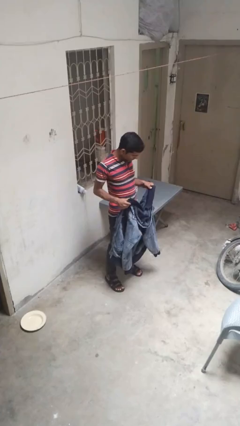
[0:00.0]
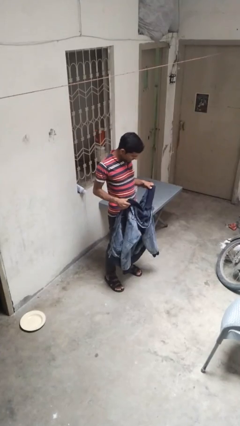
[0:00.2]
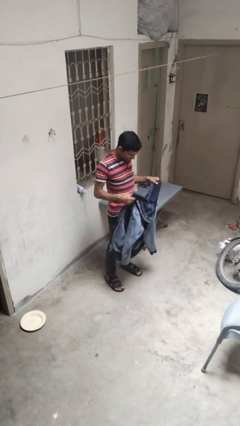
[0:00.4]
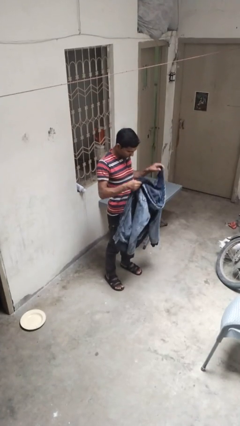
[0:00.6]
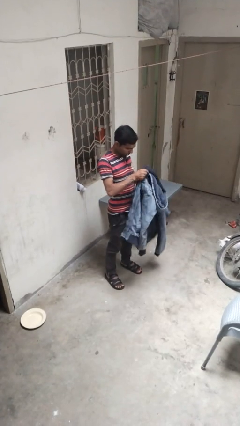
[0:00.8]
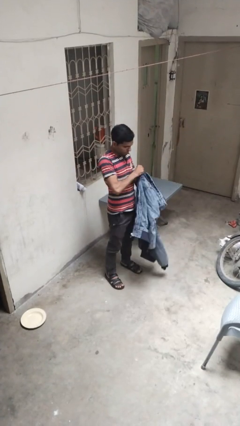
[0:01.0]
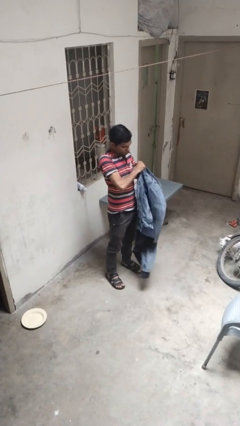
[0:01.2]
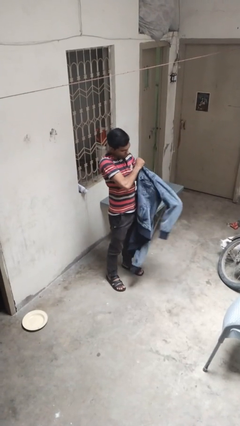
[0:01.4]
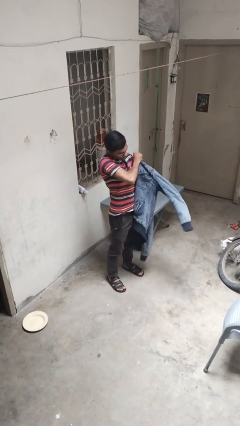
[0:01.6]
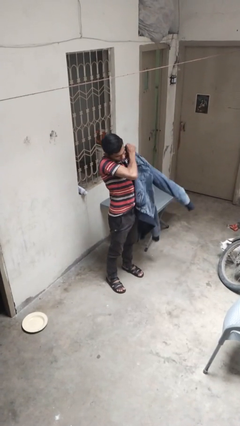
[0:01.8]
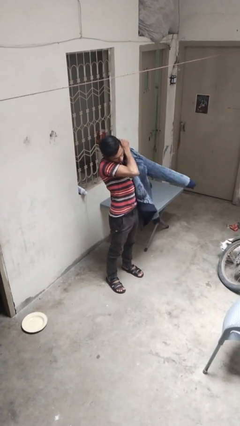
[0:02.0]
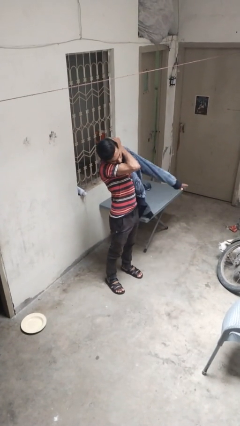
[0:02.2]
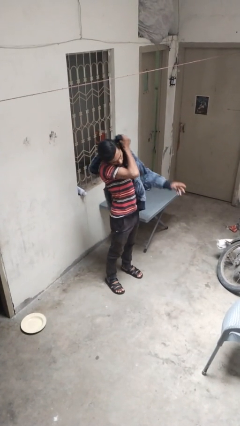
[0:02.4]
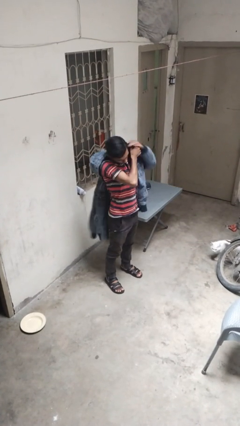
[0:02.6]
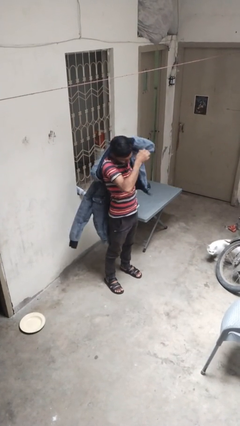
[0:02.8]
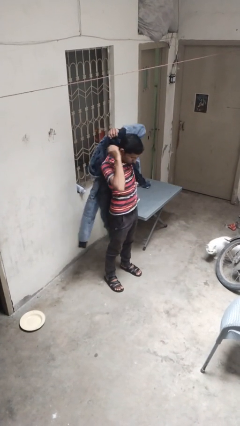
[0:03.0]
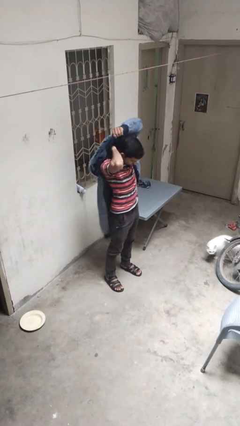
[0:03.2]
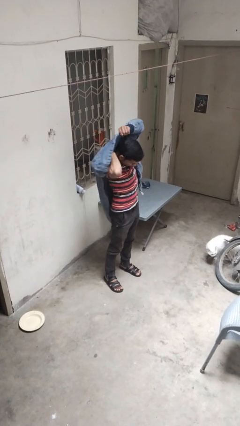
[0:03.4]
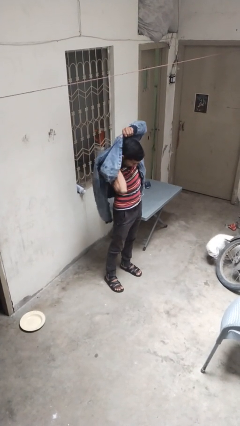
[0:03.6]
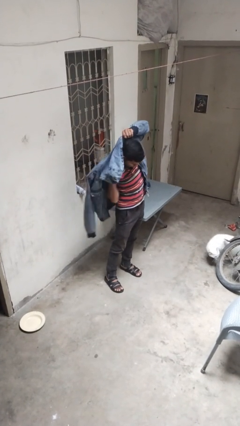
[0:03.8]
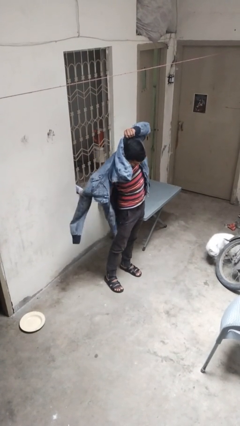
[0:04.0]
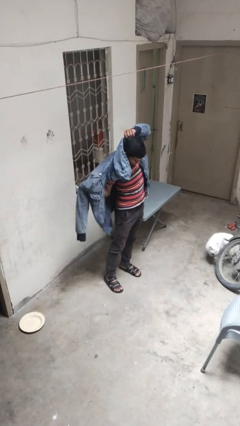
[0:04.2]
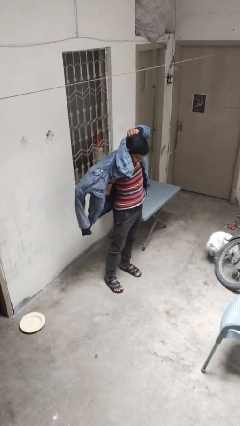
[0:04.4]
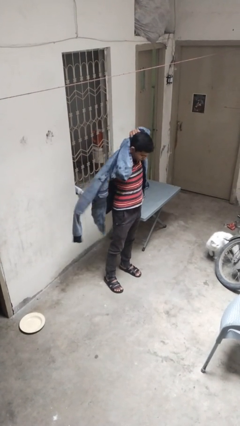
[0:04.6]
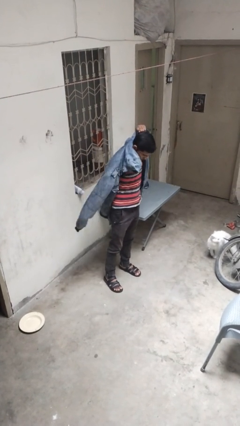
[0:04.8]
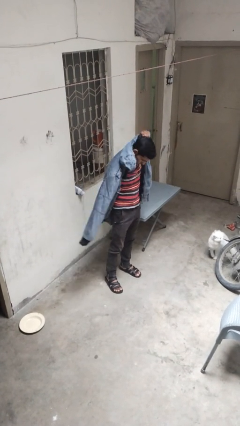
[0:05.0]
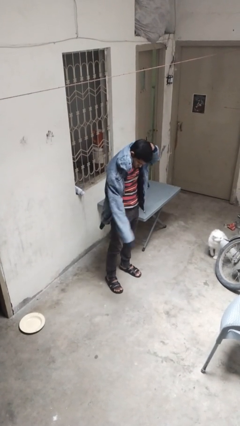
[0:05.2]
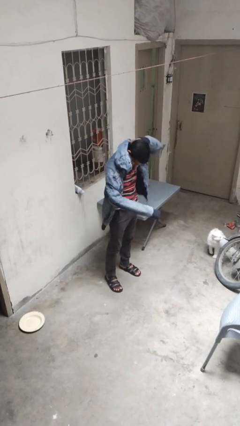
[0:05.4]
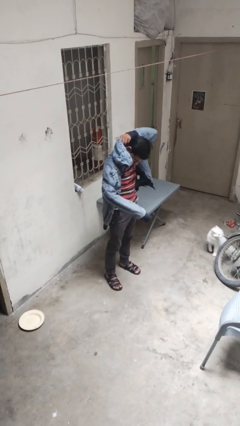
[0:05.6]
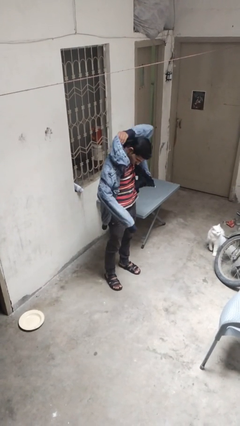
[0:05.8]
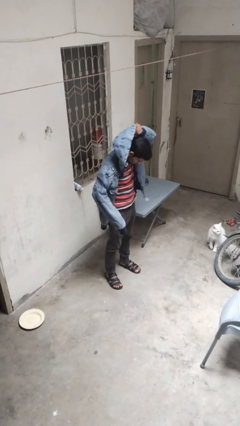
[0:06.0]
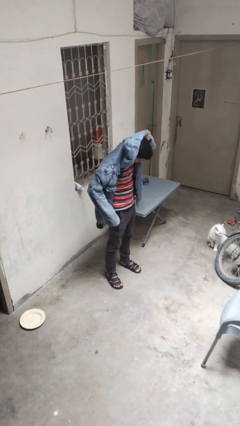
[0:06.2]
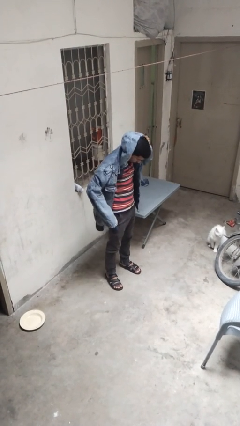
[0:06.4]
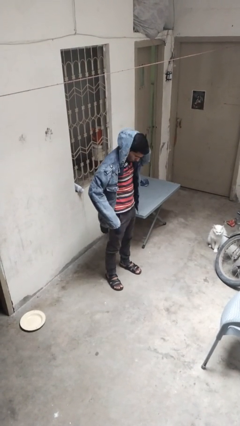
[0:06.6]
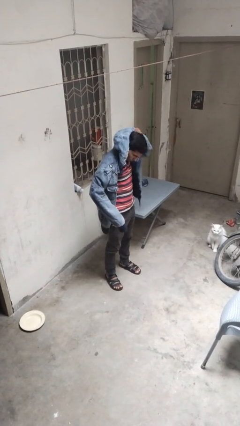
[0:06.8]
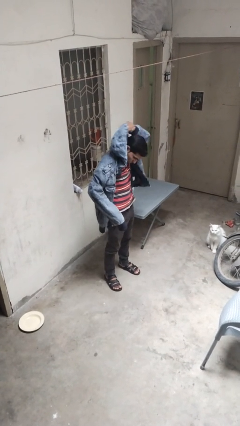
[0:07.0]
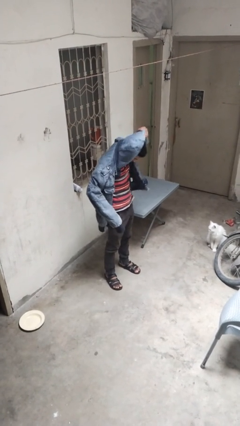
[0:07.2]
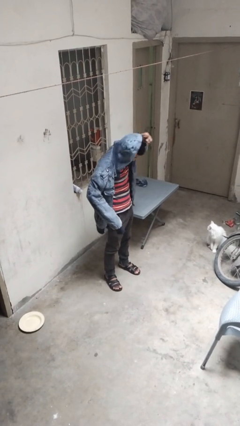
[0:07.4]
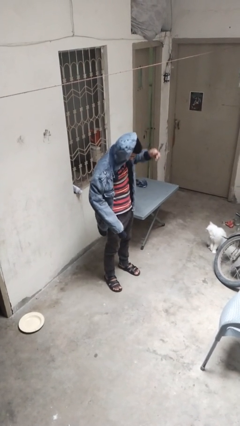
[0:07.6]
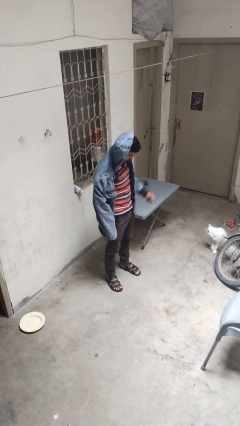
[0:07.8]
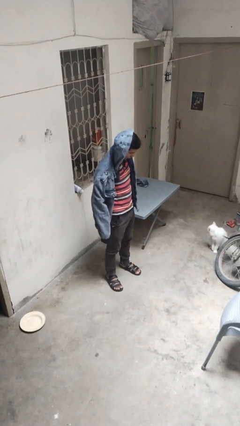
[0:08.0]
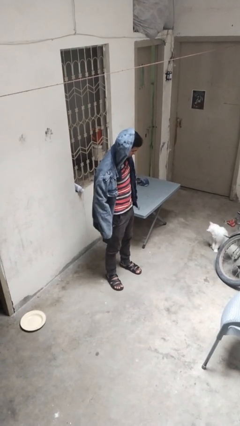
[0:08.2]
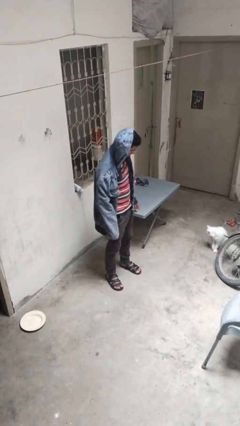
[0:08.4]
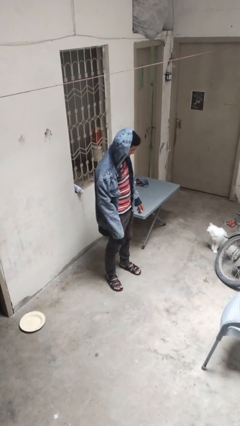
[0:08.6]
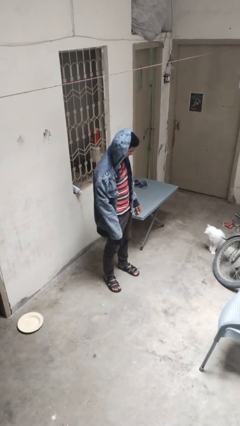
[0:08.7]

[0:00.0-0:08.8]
person puts on hoodie

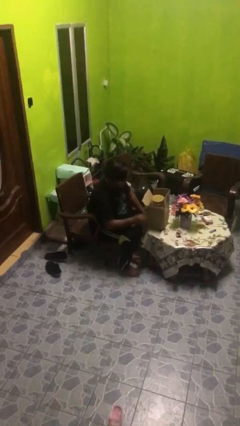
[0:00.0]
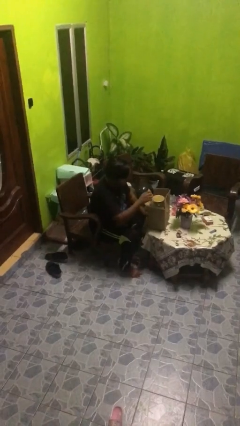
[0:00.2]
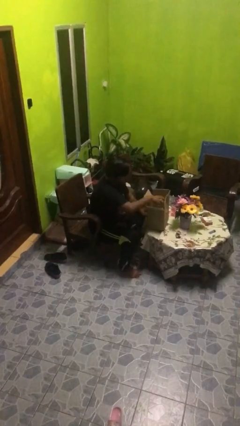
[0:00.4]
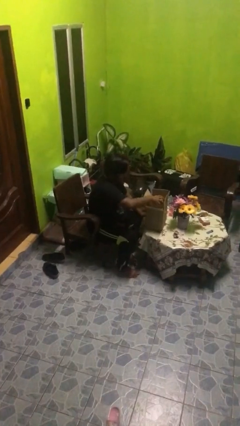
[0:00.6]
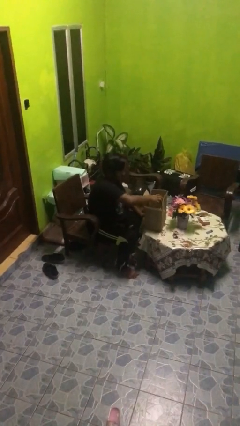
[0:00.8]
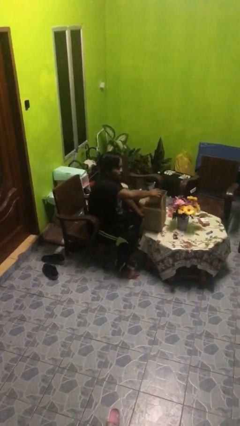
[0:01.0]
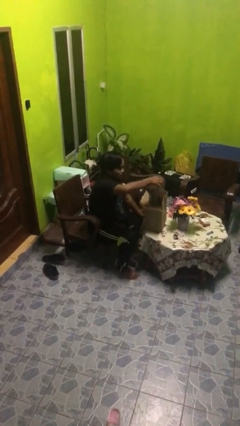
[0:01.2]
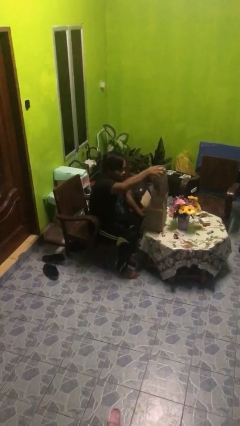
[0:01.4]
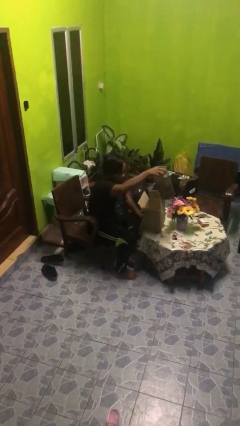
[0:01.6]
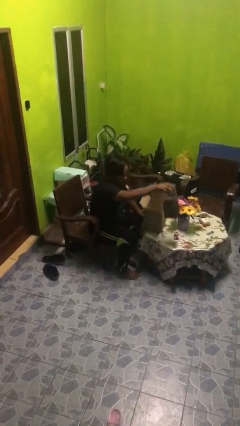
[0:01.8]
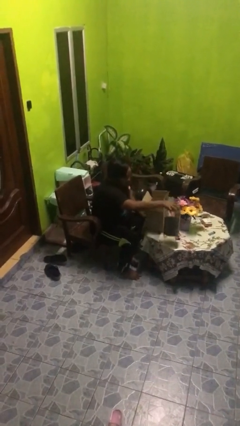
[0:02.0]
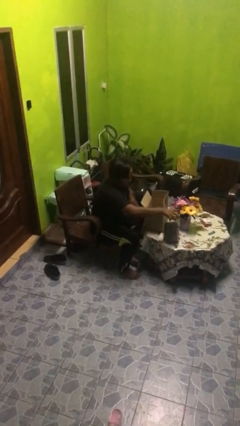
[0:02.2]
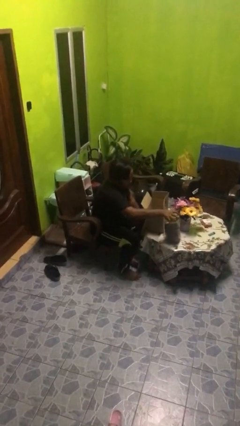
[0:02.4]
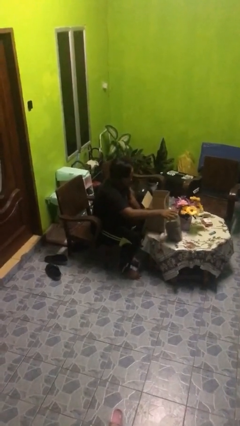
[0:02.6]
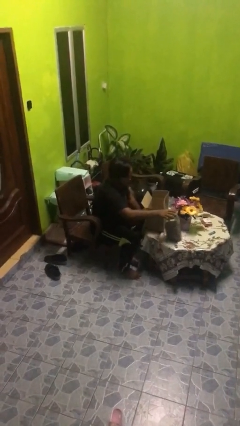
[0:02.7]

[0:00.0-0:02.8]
person takes object from box

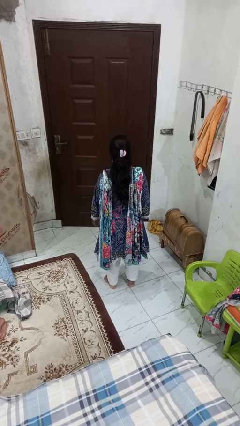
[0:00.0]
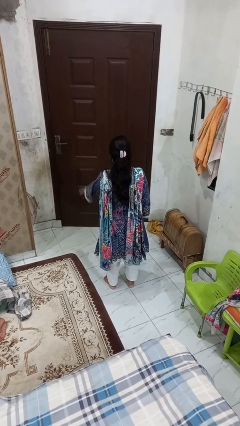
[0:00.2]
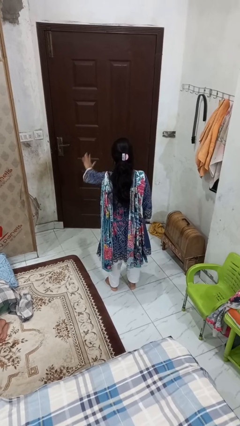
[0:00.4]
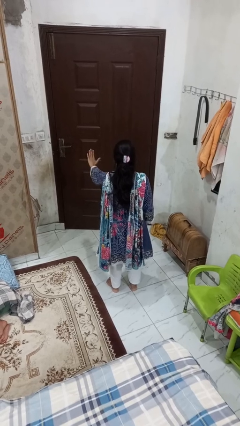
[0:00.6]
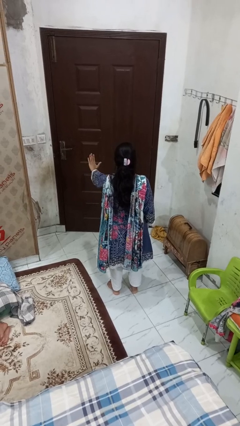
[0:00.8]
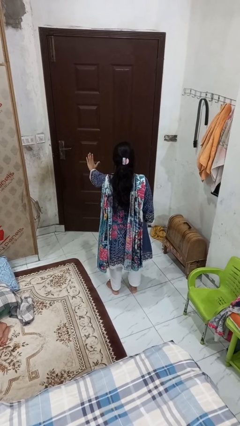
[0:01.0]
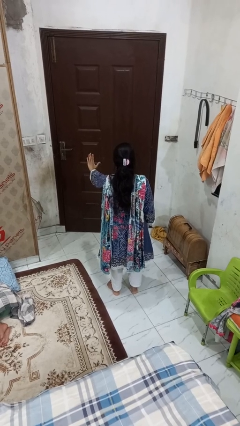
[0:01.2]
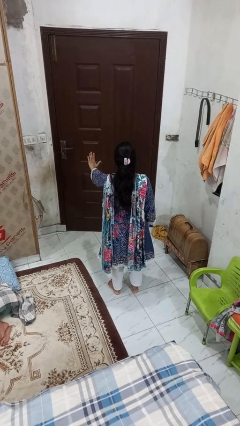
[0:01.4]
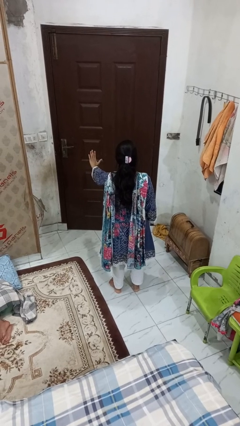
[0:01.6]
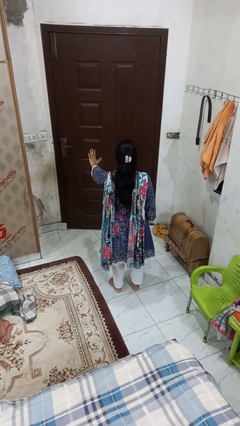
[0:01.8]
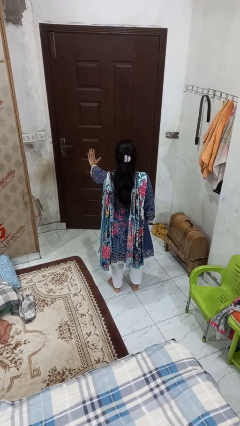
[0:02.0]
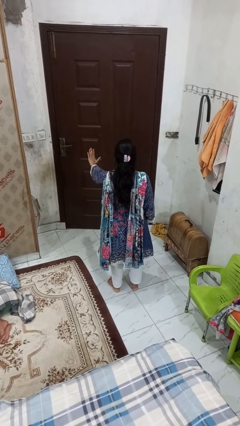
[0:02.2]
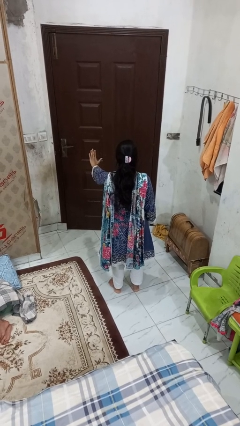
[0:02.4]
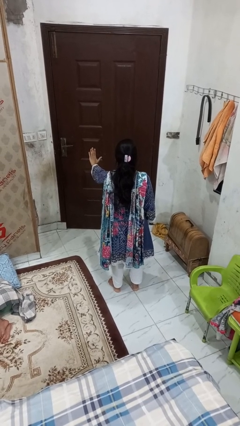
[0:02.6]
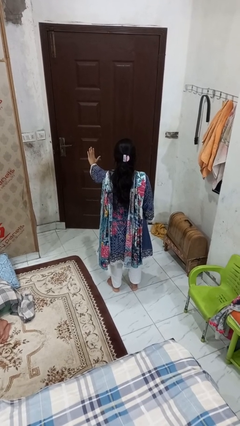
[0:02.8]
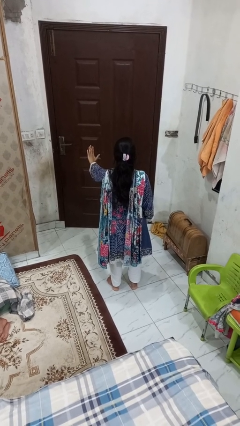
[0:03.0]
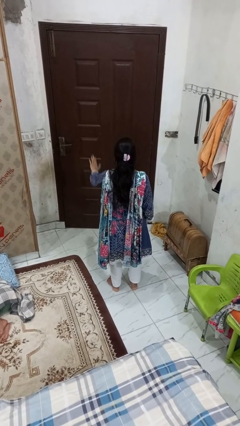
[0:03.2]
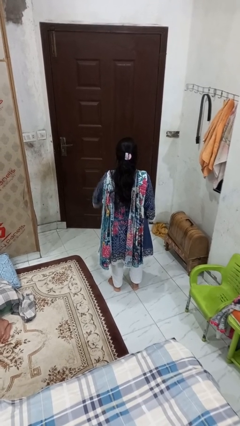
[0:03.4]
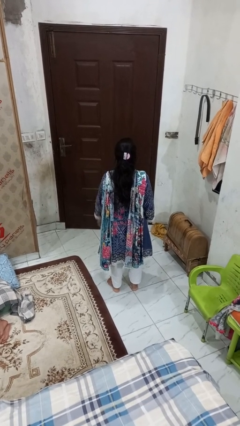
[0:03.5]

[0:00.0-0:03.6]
person gestures stop

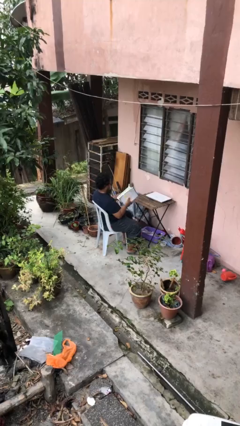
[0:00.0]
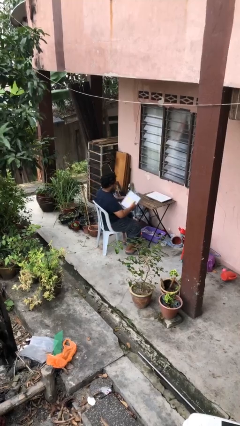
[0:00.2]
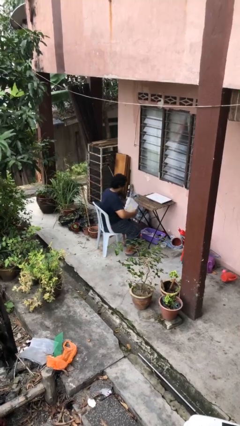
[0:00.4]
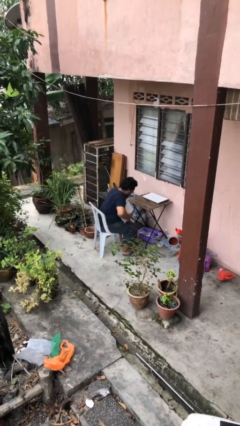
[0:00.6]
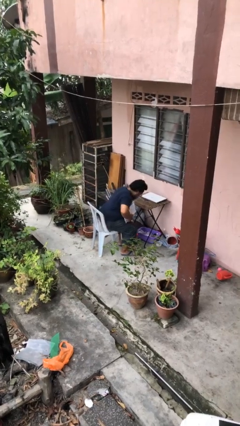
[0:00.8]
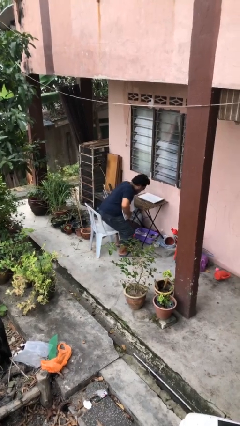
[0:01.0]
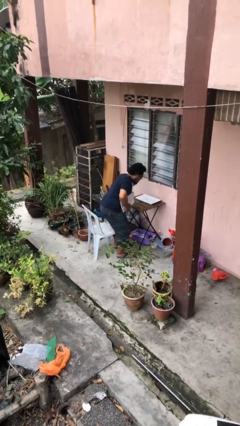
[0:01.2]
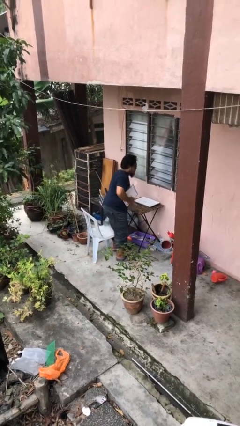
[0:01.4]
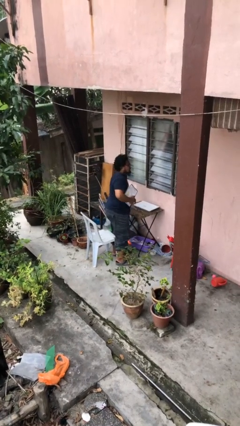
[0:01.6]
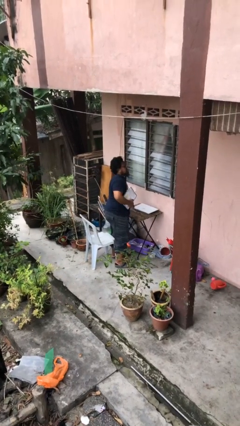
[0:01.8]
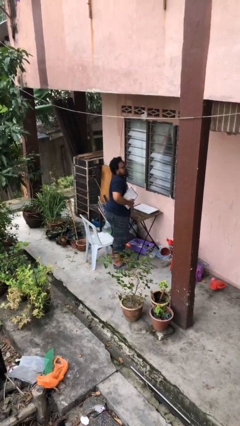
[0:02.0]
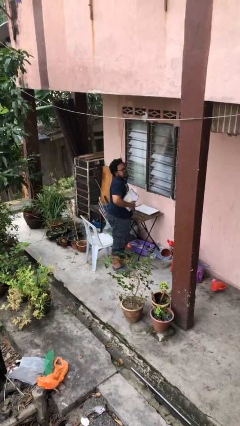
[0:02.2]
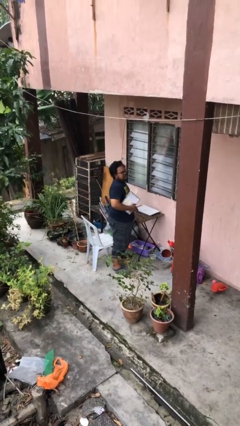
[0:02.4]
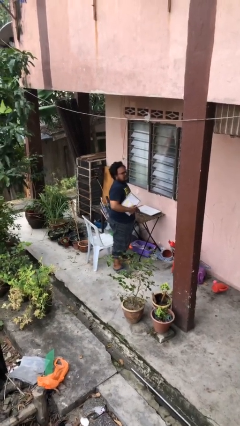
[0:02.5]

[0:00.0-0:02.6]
person stands up
